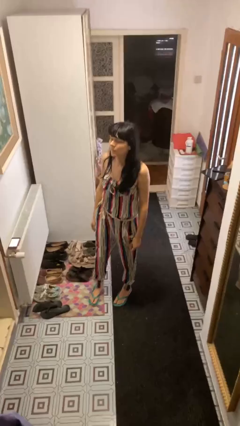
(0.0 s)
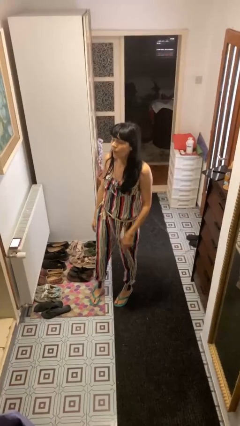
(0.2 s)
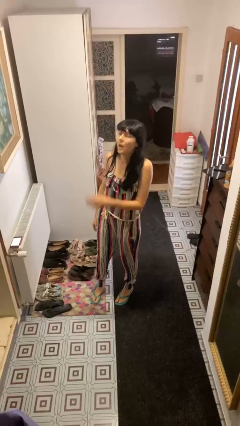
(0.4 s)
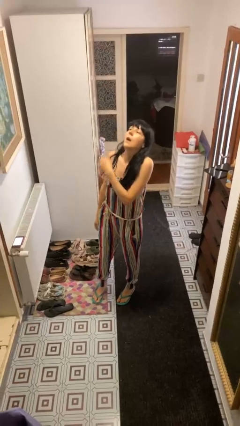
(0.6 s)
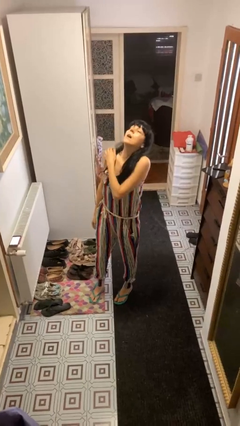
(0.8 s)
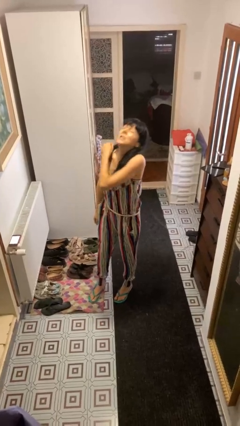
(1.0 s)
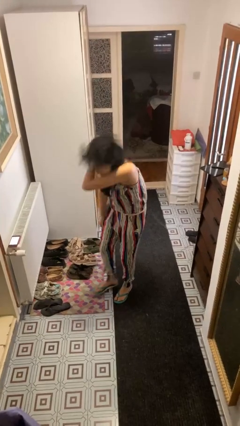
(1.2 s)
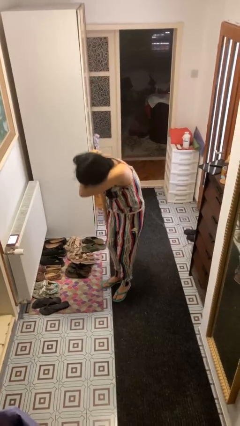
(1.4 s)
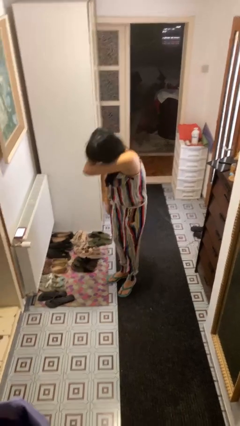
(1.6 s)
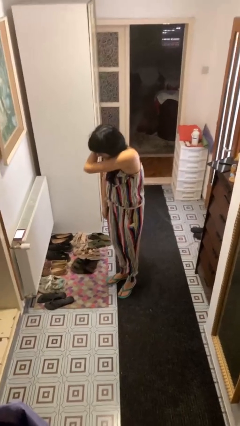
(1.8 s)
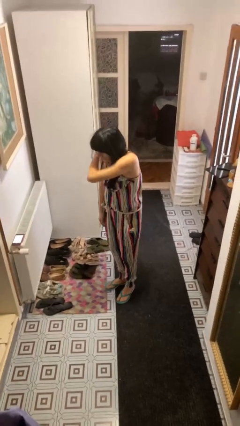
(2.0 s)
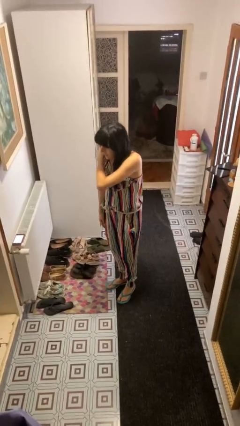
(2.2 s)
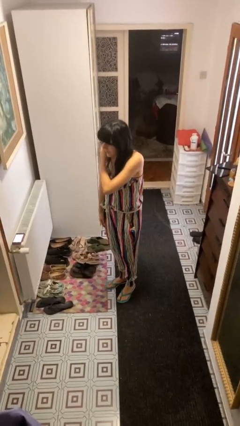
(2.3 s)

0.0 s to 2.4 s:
person sneezes into arm

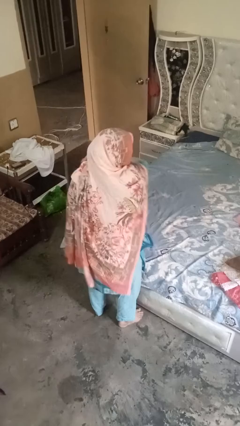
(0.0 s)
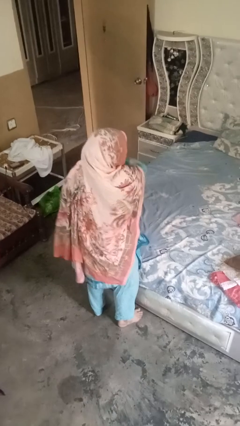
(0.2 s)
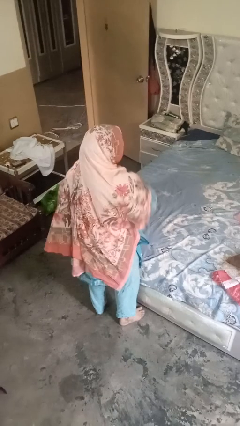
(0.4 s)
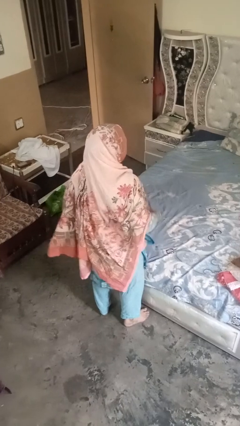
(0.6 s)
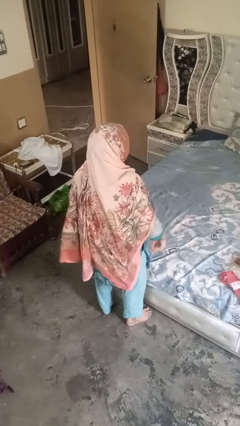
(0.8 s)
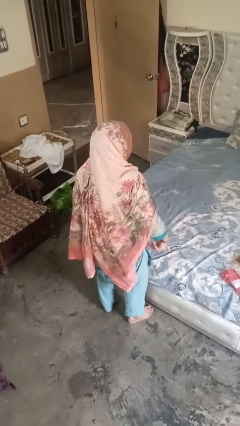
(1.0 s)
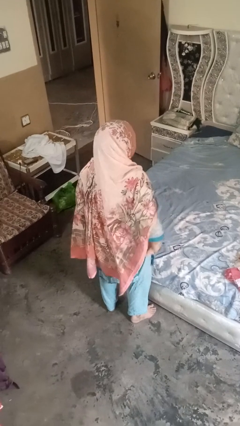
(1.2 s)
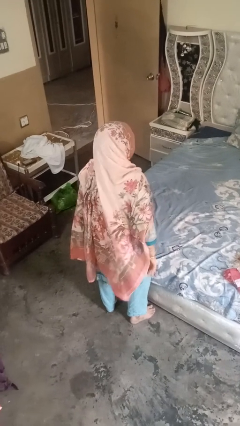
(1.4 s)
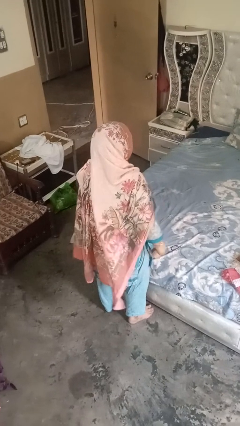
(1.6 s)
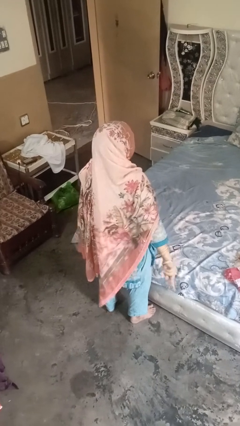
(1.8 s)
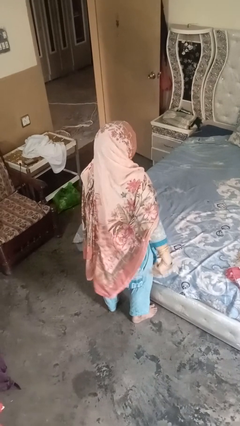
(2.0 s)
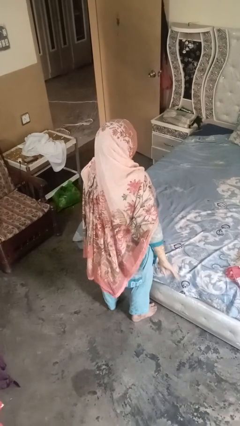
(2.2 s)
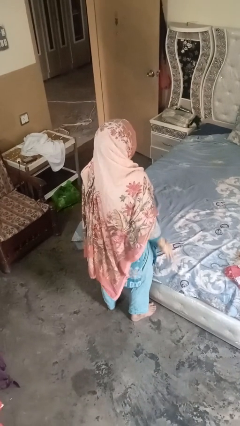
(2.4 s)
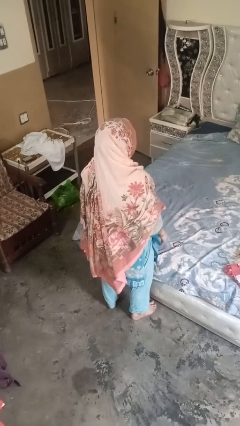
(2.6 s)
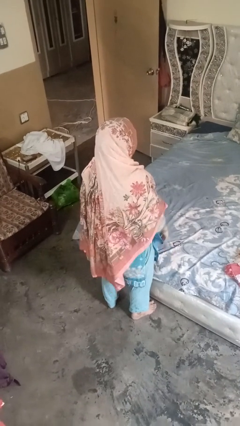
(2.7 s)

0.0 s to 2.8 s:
person gestures behind me

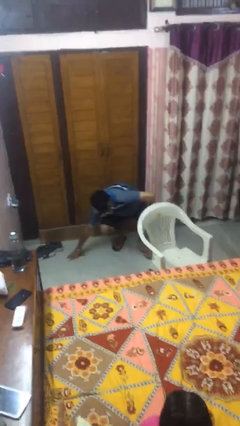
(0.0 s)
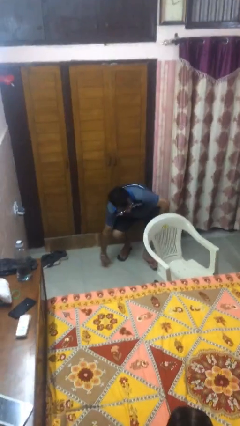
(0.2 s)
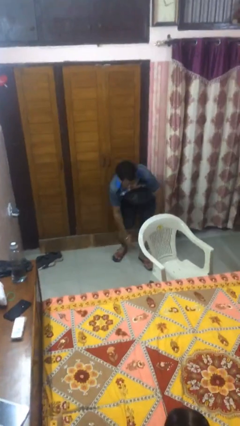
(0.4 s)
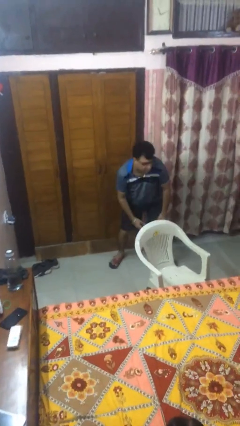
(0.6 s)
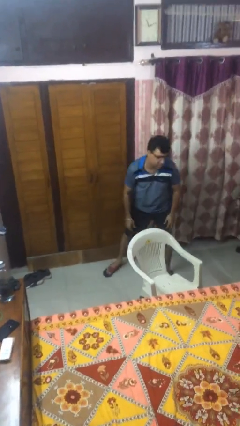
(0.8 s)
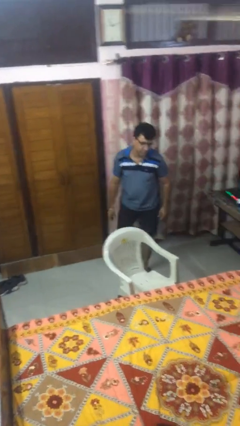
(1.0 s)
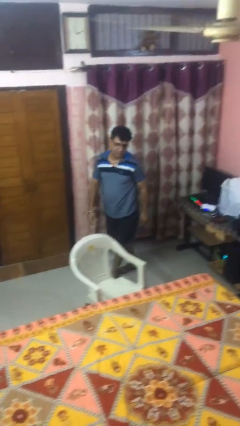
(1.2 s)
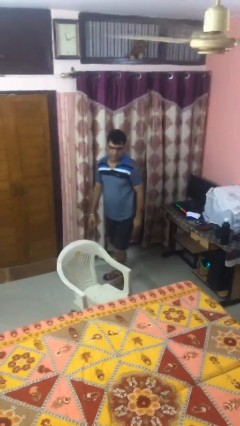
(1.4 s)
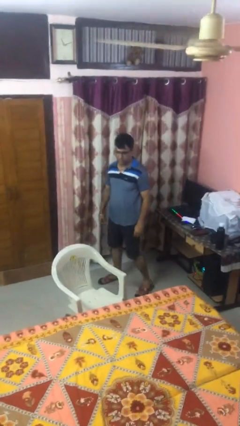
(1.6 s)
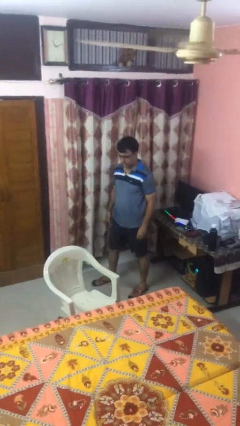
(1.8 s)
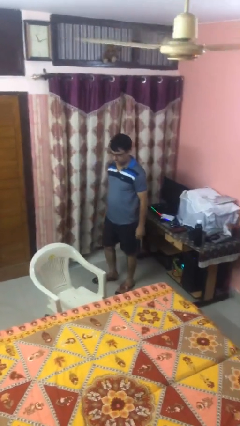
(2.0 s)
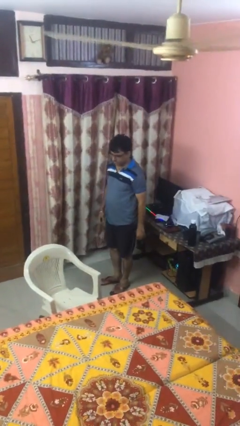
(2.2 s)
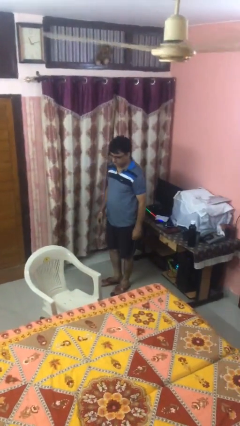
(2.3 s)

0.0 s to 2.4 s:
person stands up from floor

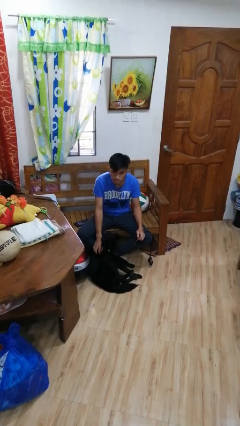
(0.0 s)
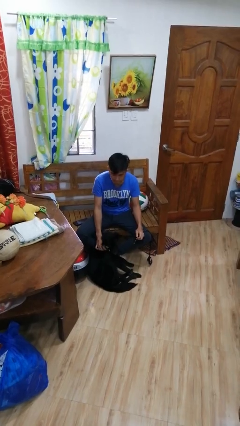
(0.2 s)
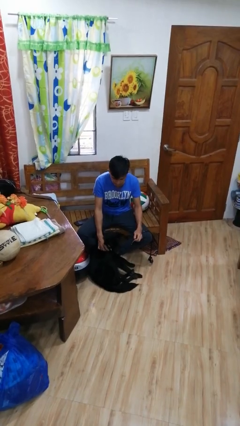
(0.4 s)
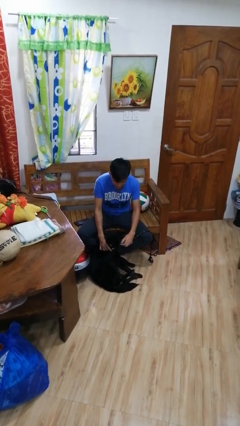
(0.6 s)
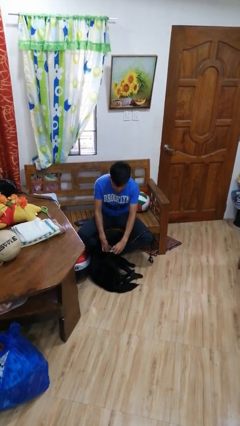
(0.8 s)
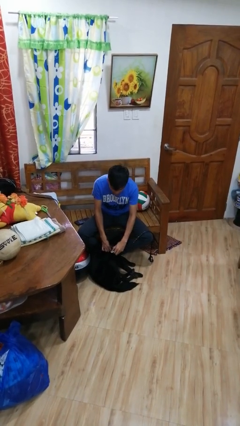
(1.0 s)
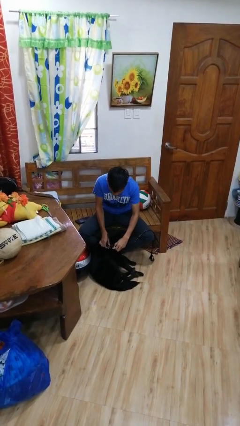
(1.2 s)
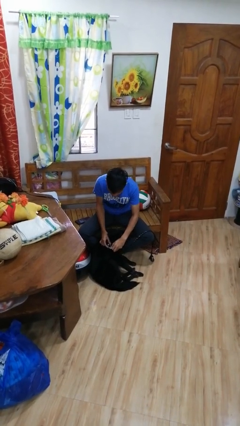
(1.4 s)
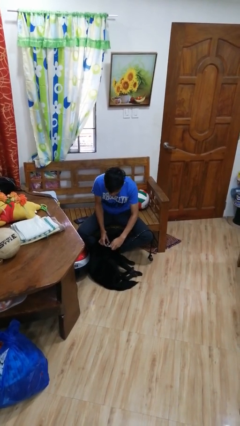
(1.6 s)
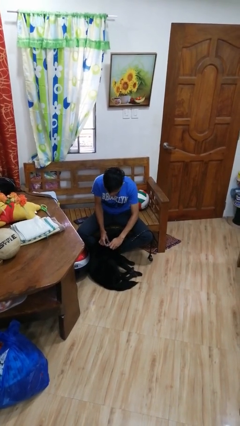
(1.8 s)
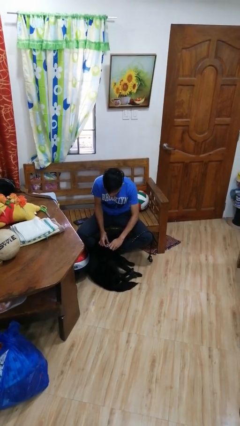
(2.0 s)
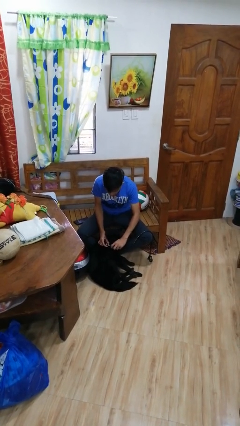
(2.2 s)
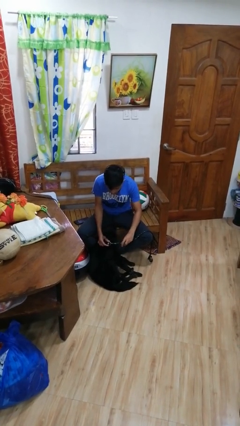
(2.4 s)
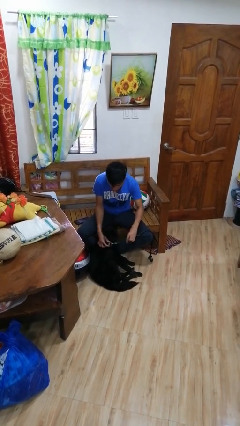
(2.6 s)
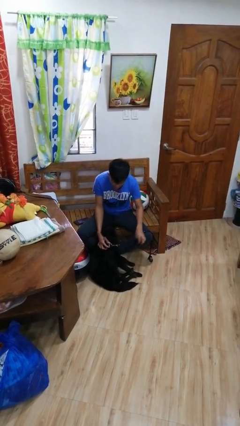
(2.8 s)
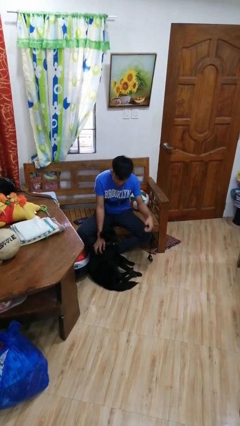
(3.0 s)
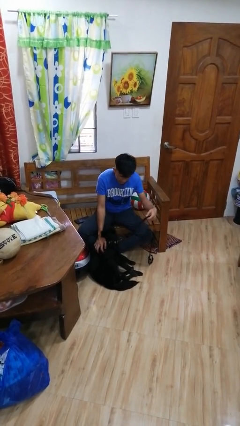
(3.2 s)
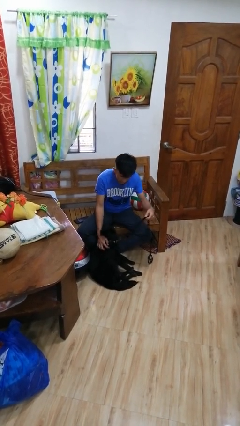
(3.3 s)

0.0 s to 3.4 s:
person attaches leash to dog

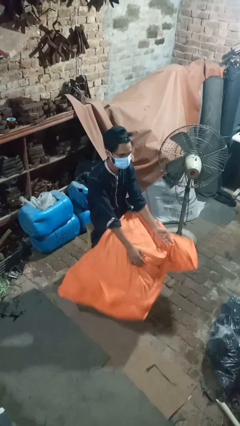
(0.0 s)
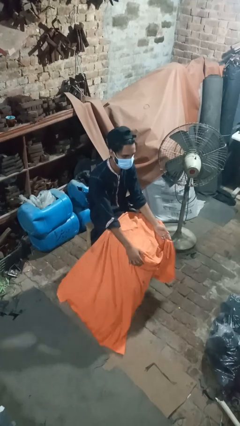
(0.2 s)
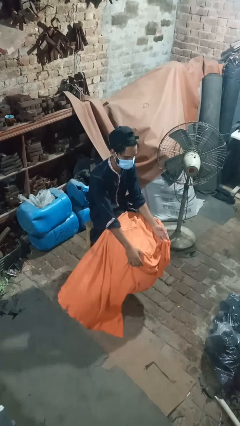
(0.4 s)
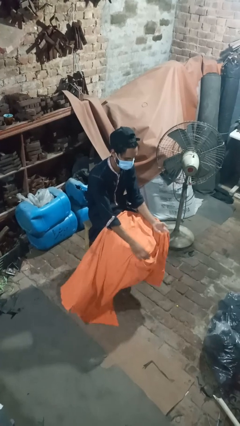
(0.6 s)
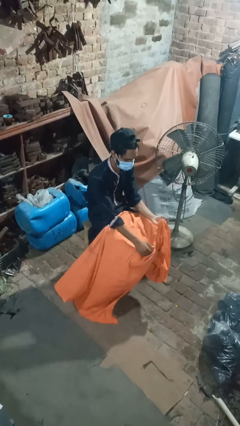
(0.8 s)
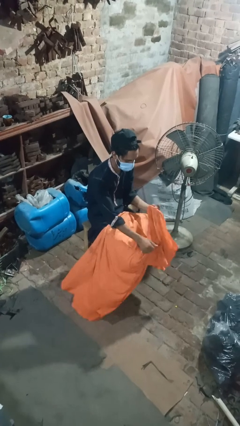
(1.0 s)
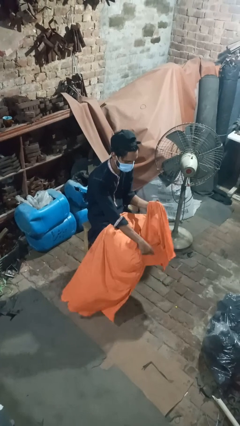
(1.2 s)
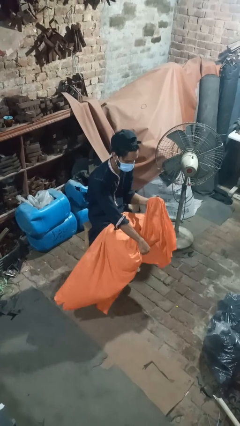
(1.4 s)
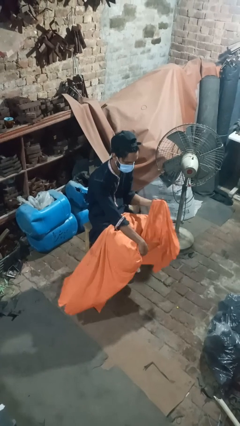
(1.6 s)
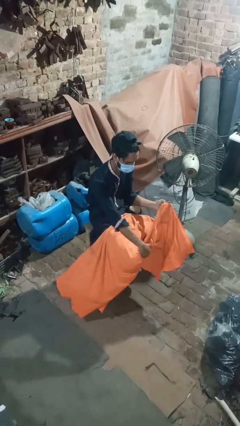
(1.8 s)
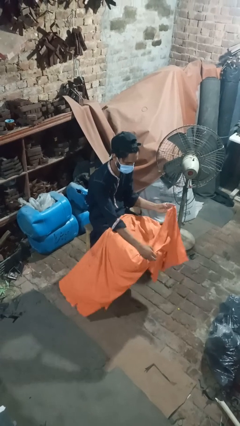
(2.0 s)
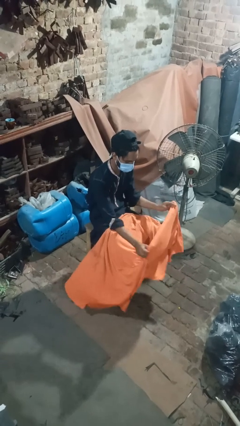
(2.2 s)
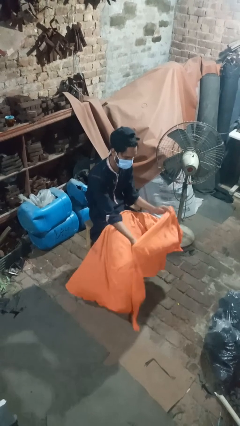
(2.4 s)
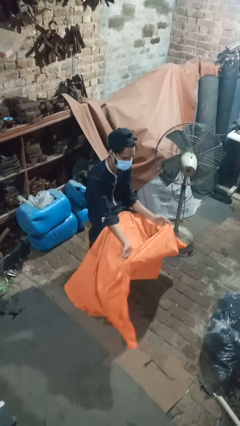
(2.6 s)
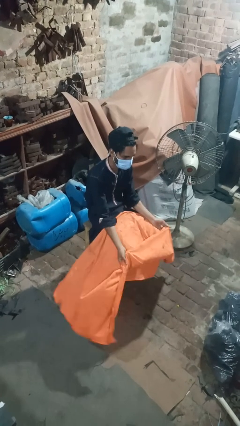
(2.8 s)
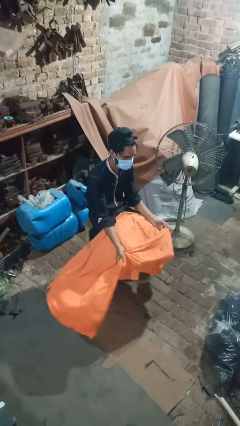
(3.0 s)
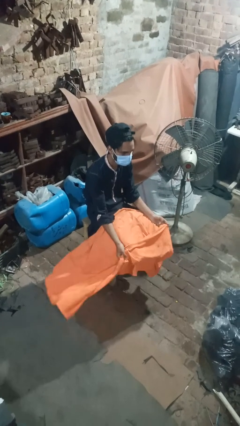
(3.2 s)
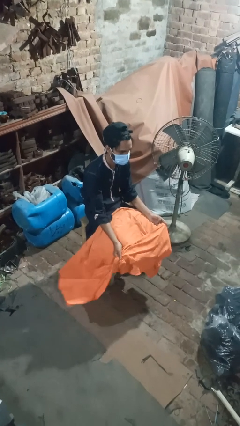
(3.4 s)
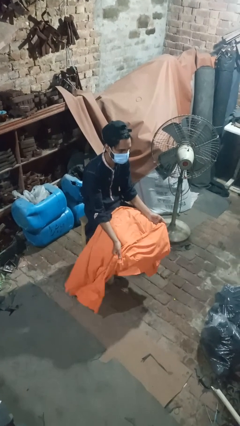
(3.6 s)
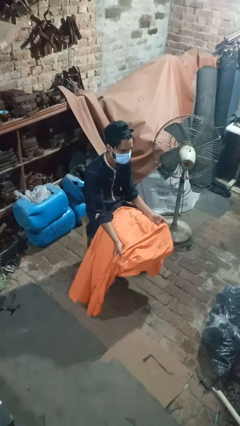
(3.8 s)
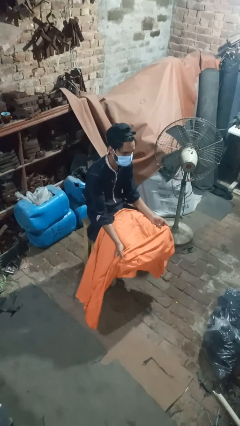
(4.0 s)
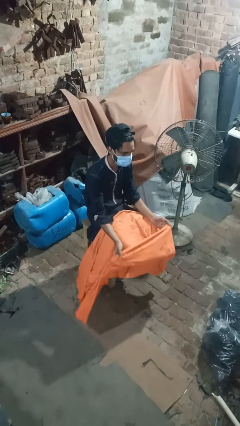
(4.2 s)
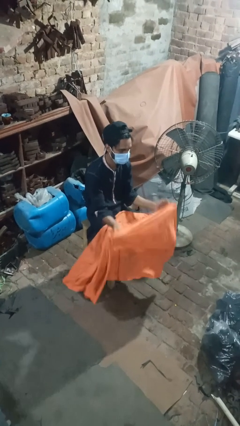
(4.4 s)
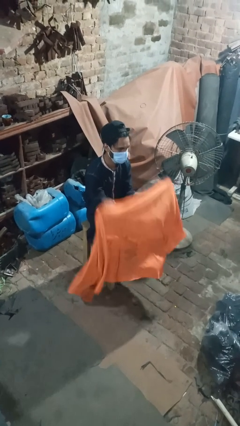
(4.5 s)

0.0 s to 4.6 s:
person uncovers with blanket

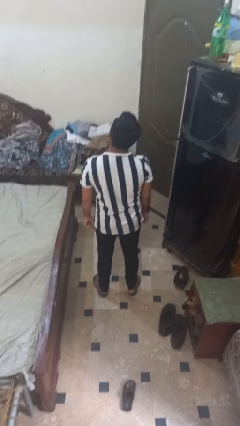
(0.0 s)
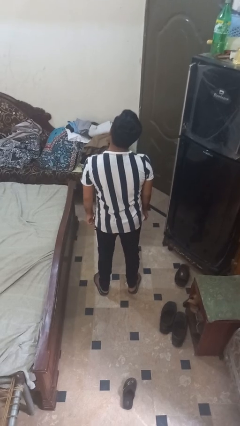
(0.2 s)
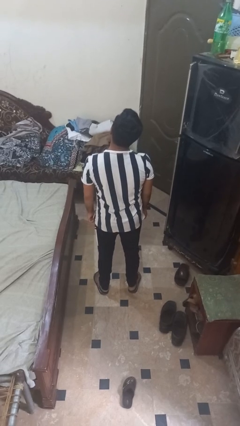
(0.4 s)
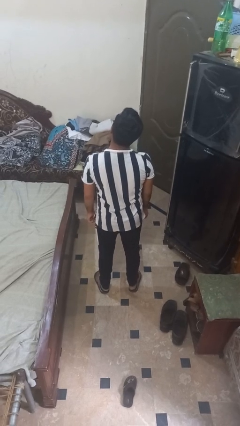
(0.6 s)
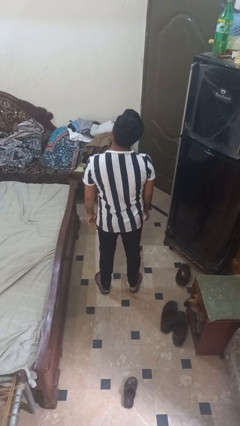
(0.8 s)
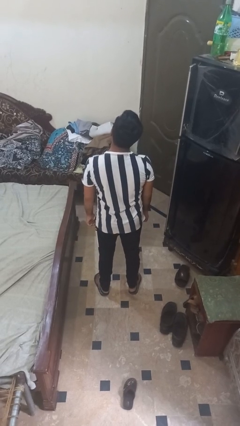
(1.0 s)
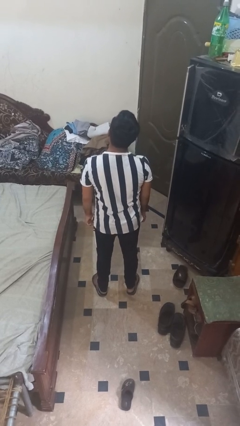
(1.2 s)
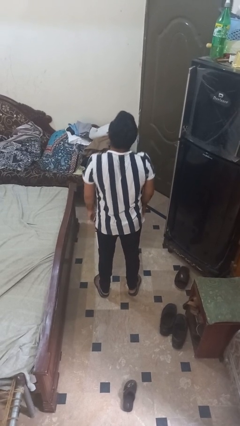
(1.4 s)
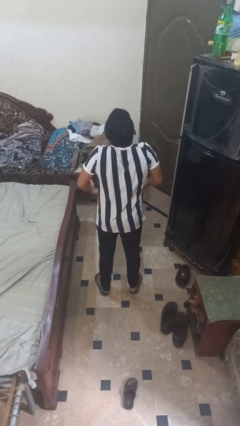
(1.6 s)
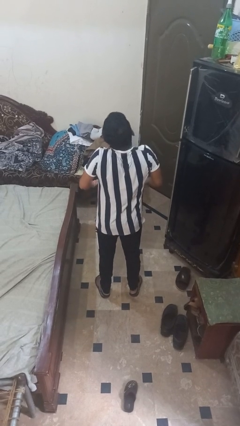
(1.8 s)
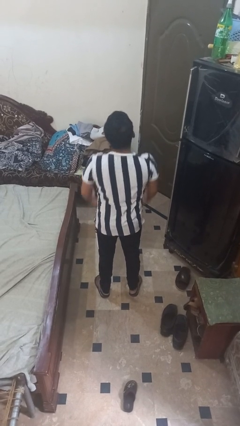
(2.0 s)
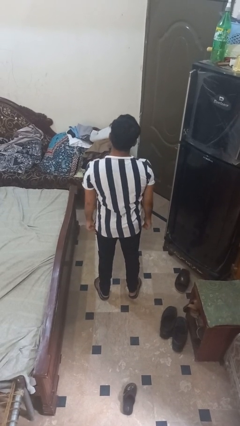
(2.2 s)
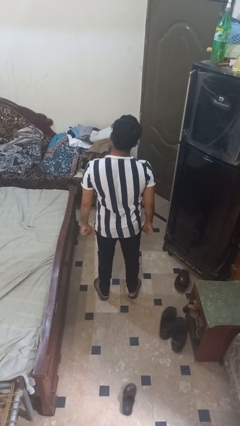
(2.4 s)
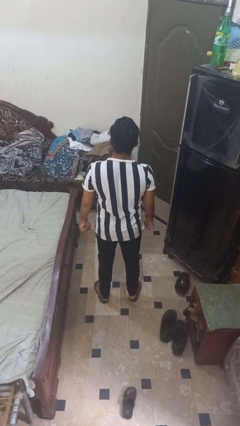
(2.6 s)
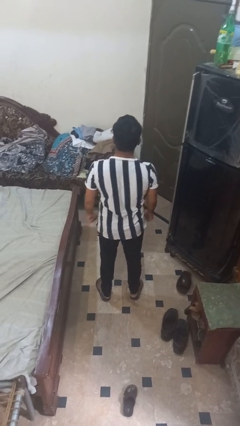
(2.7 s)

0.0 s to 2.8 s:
person shrugs
